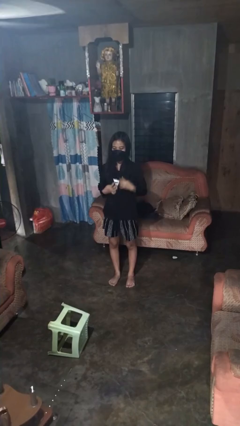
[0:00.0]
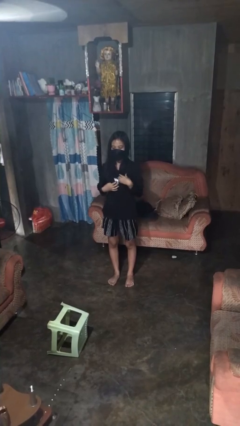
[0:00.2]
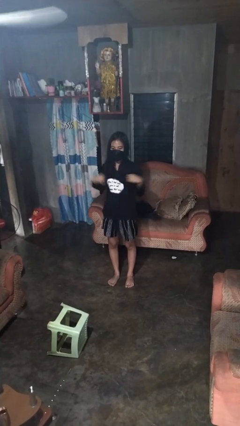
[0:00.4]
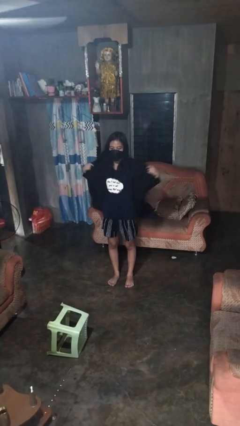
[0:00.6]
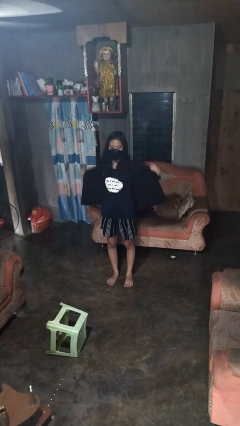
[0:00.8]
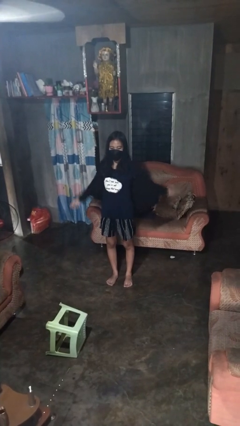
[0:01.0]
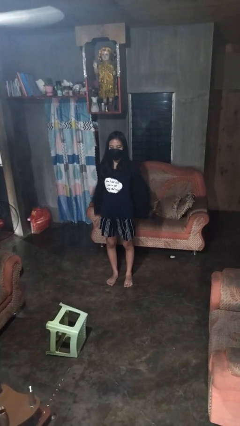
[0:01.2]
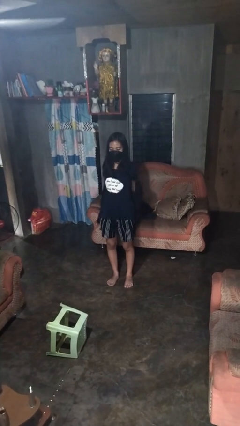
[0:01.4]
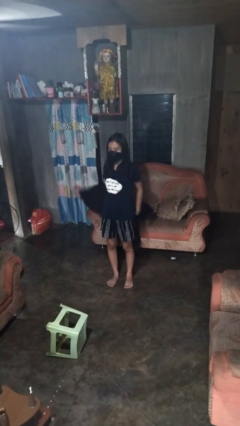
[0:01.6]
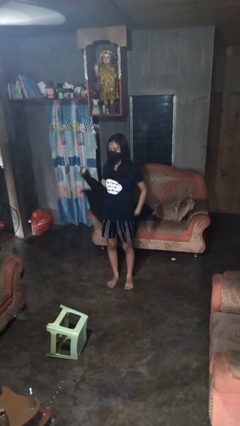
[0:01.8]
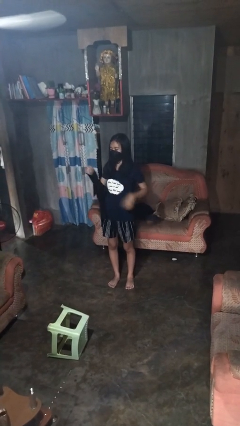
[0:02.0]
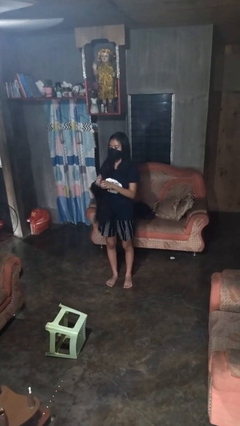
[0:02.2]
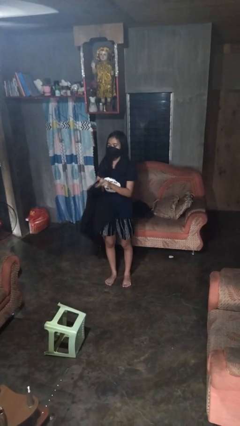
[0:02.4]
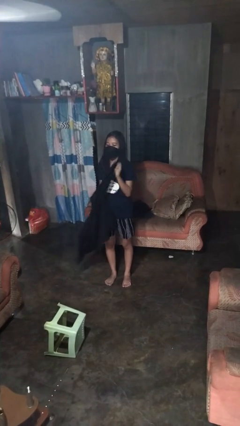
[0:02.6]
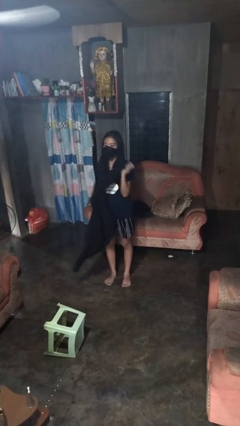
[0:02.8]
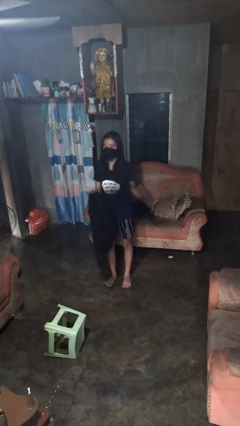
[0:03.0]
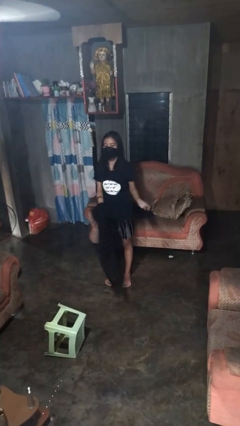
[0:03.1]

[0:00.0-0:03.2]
person takes off shirt

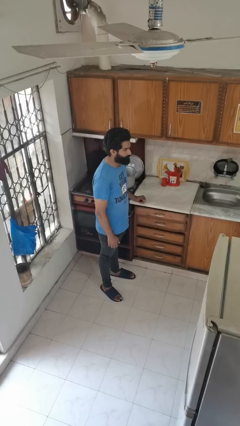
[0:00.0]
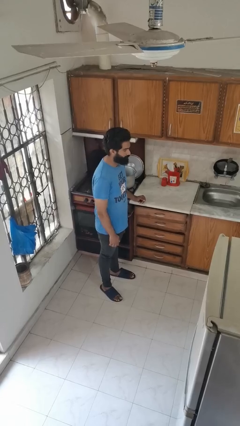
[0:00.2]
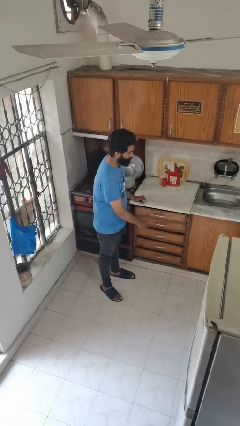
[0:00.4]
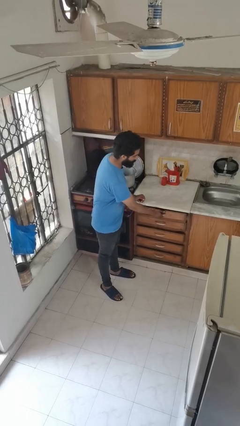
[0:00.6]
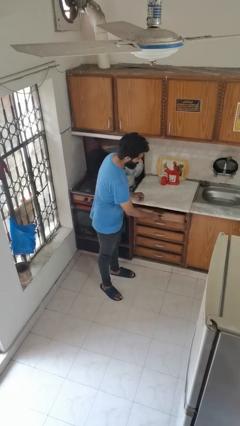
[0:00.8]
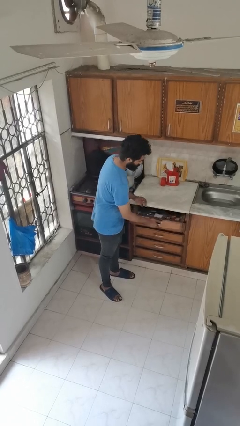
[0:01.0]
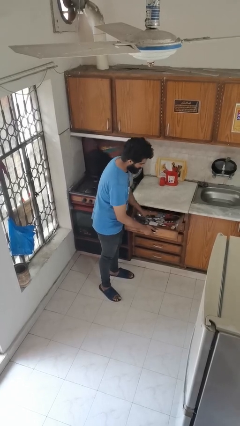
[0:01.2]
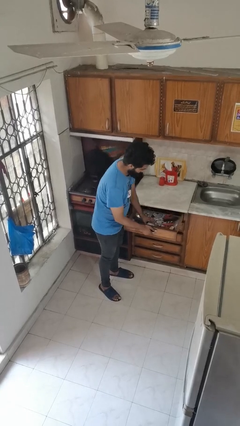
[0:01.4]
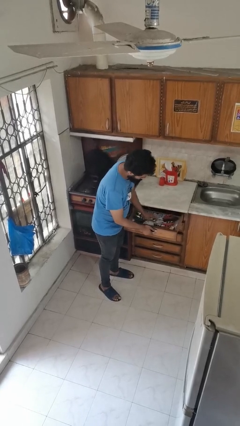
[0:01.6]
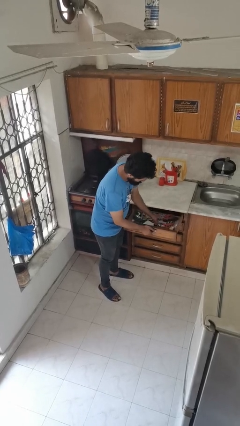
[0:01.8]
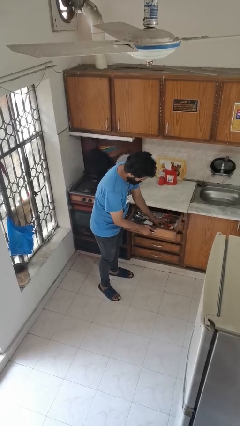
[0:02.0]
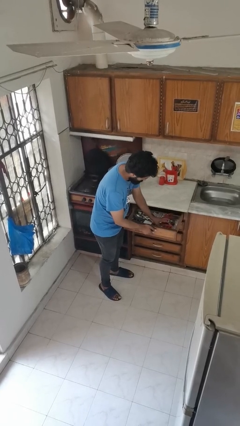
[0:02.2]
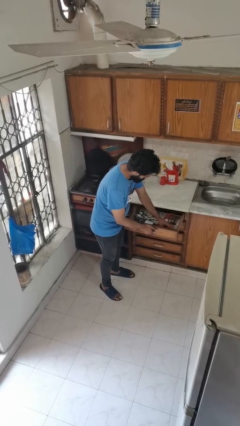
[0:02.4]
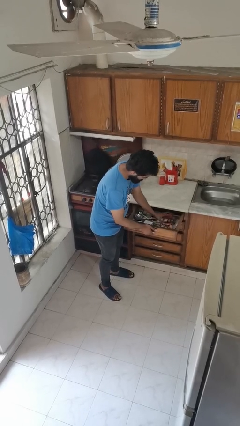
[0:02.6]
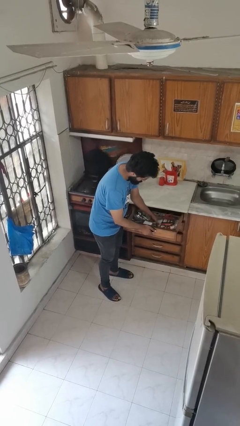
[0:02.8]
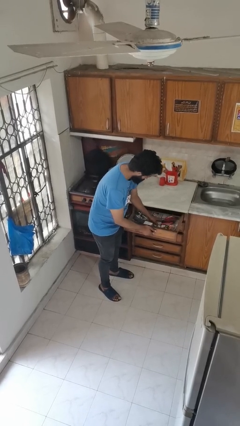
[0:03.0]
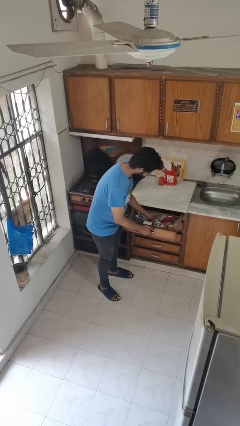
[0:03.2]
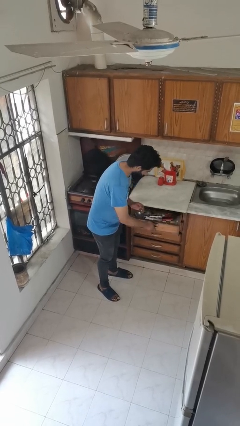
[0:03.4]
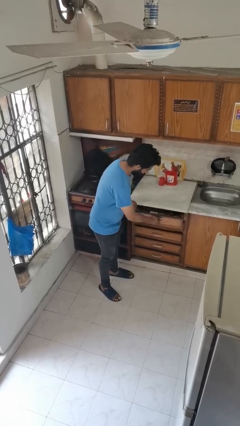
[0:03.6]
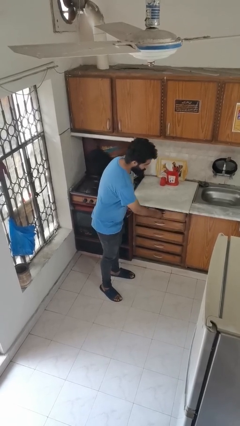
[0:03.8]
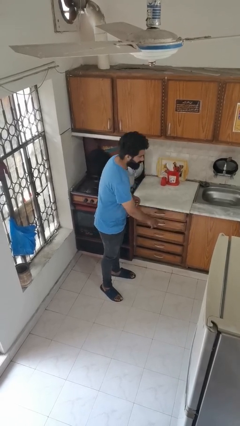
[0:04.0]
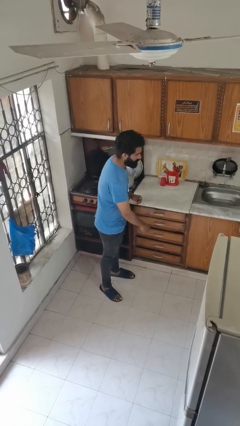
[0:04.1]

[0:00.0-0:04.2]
person searches in kitchen drawer

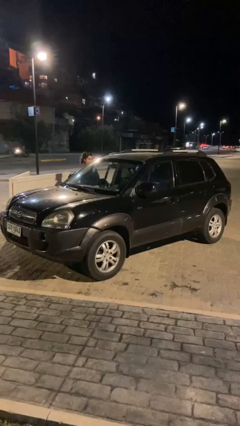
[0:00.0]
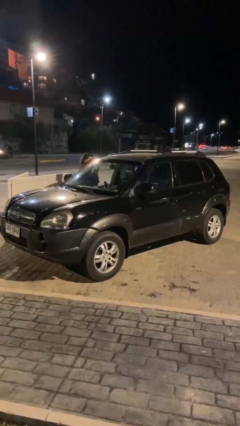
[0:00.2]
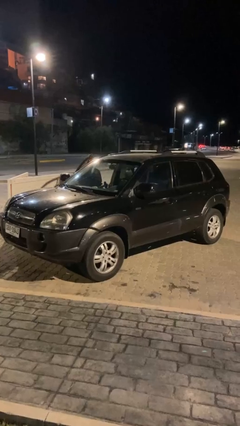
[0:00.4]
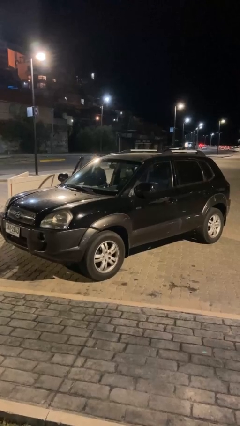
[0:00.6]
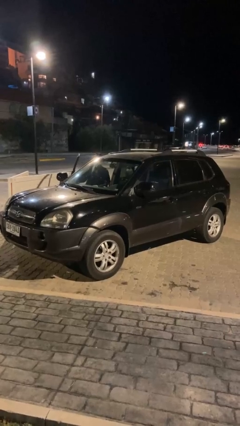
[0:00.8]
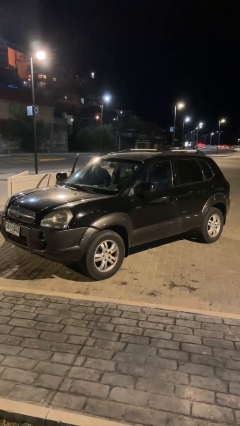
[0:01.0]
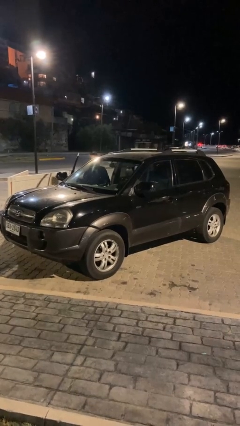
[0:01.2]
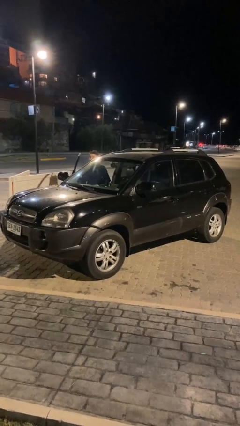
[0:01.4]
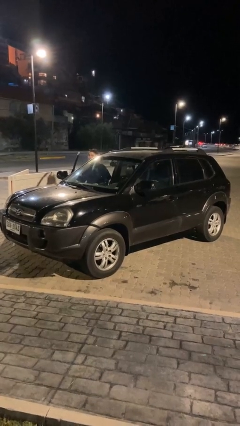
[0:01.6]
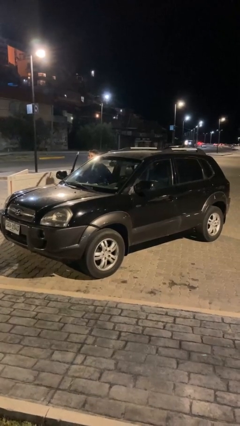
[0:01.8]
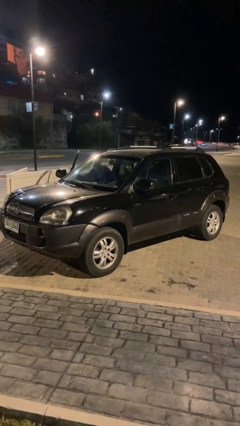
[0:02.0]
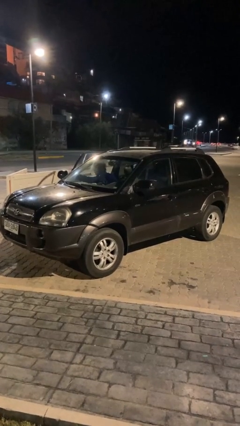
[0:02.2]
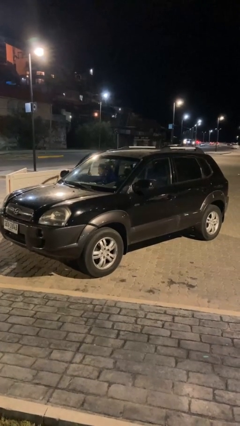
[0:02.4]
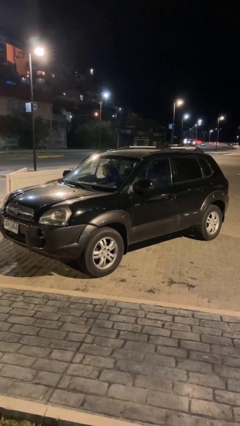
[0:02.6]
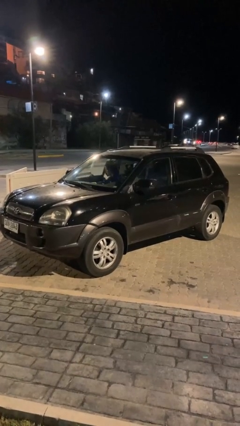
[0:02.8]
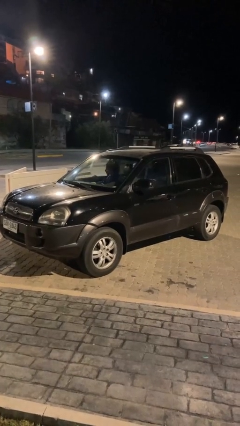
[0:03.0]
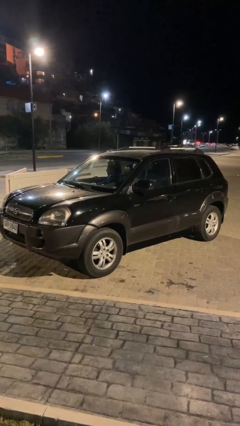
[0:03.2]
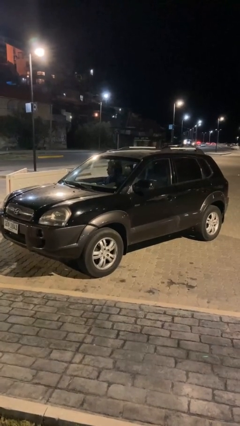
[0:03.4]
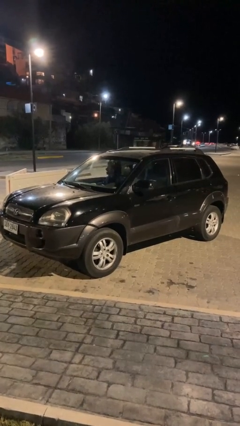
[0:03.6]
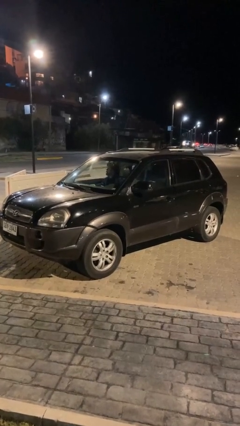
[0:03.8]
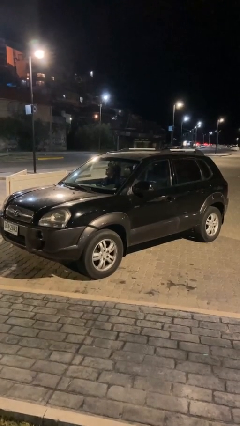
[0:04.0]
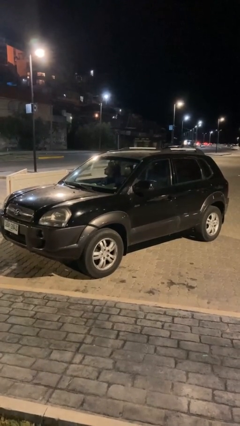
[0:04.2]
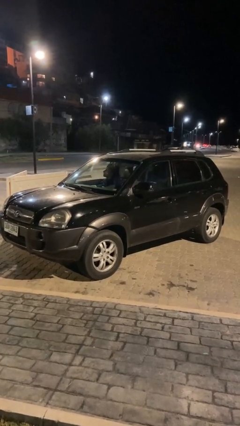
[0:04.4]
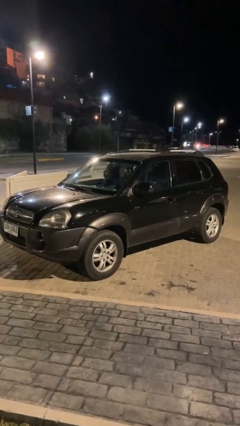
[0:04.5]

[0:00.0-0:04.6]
car picks up person

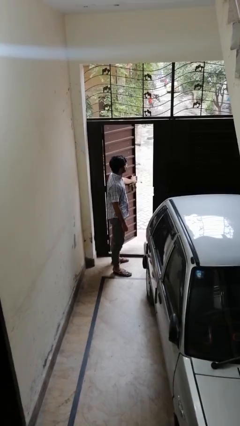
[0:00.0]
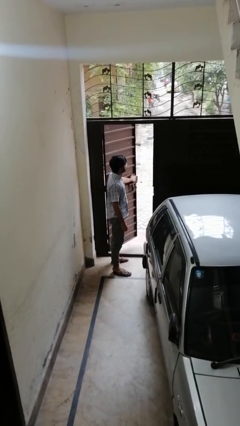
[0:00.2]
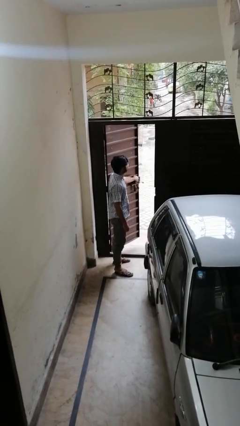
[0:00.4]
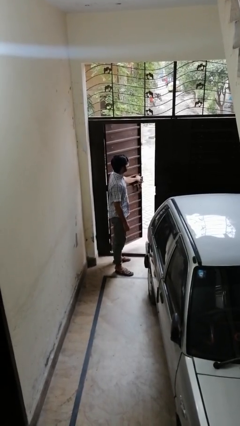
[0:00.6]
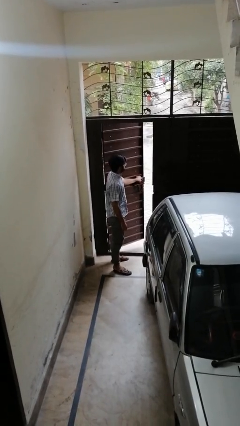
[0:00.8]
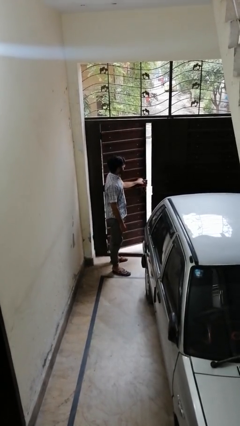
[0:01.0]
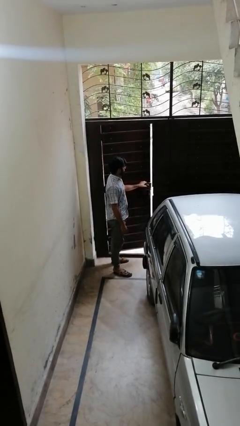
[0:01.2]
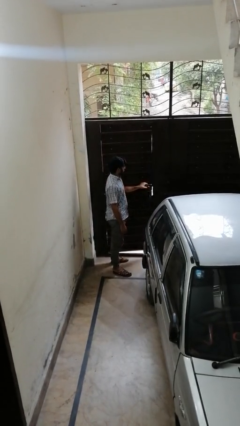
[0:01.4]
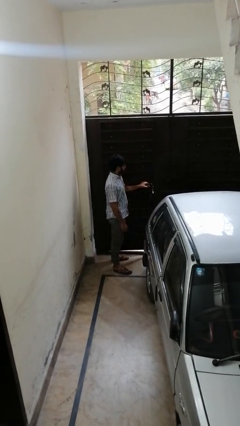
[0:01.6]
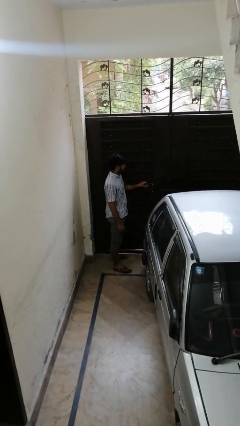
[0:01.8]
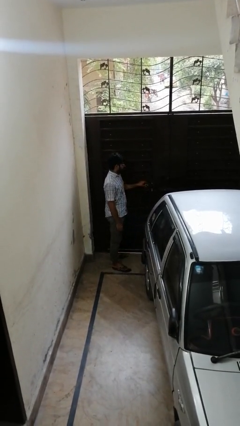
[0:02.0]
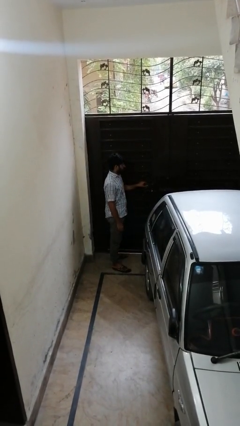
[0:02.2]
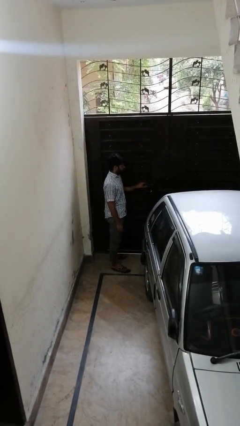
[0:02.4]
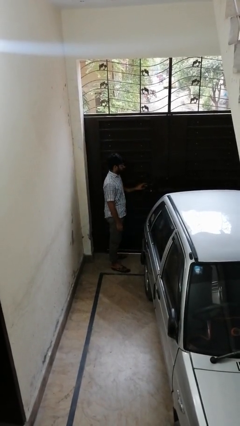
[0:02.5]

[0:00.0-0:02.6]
person closes gate

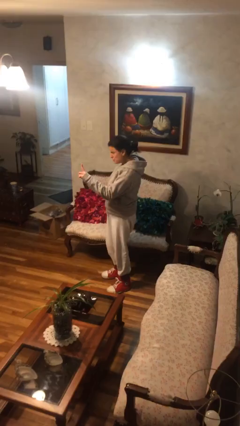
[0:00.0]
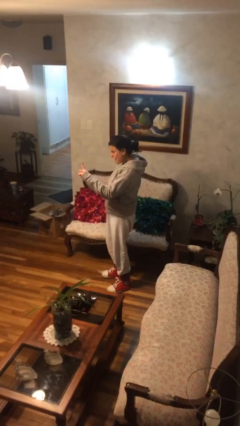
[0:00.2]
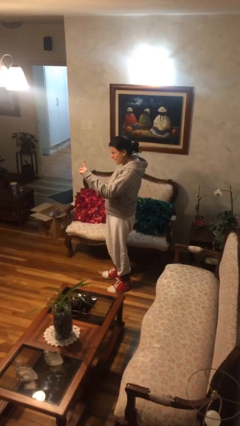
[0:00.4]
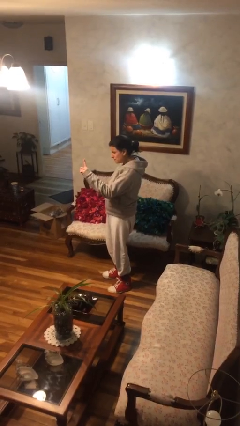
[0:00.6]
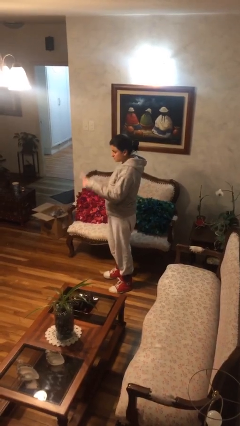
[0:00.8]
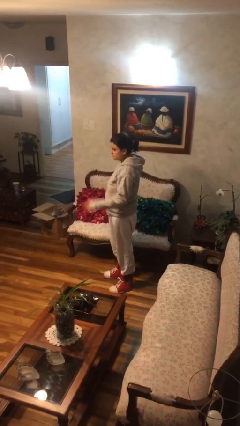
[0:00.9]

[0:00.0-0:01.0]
person gestures number one

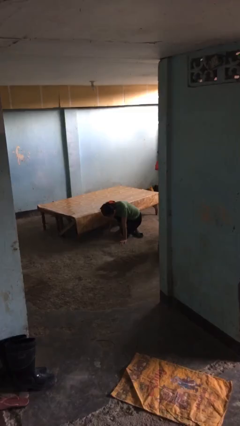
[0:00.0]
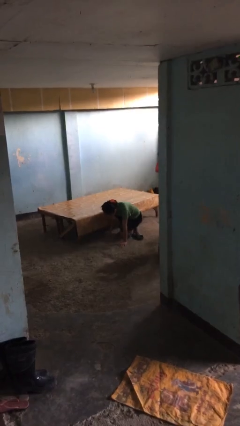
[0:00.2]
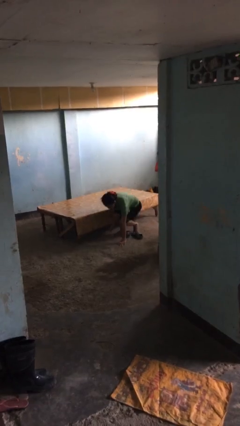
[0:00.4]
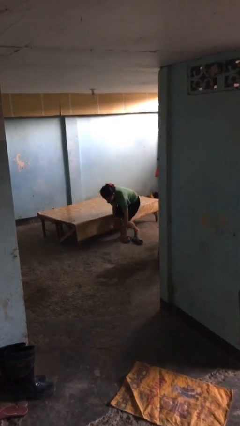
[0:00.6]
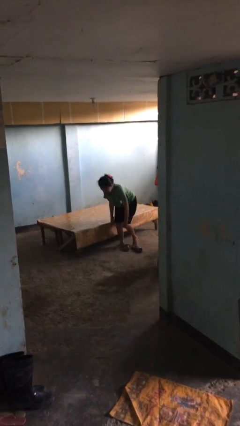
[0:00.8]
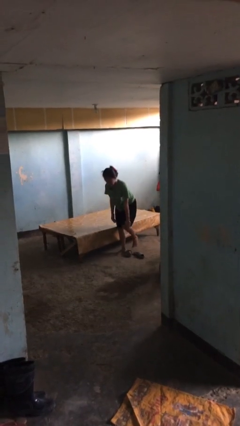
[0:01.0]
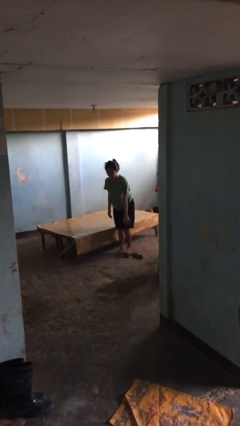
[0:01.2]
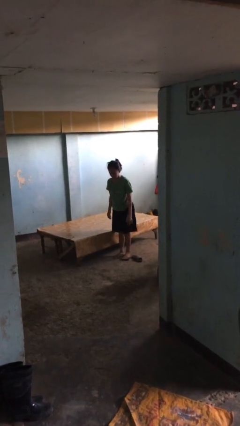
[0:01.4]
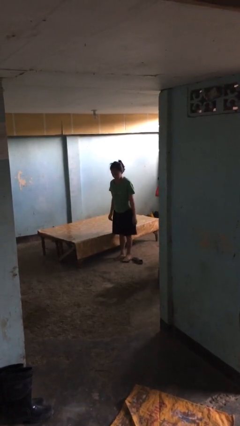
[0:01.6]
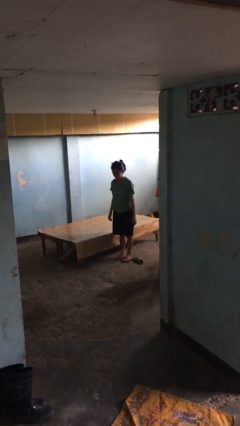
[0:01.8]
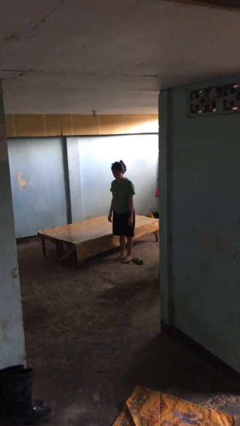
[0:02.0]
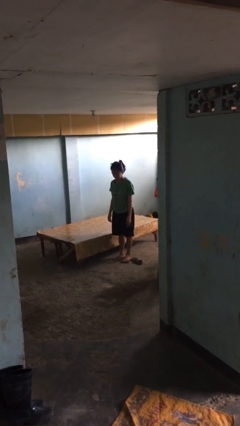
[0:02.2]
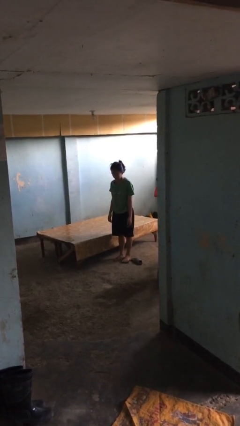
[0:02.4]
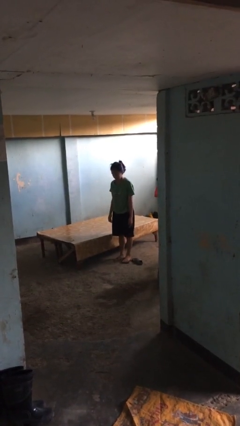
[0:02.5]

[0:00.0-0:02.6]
person stands up from floor
